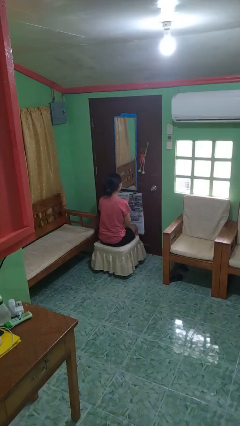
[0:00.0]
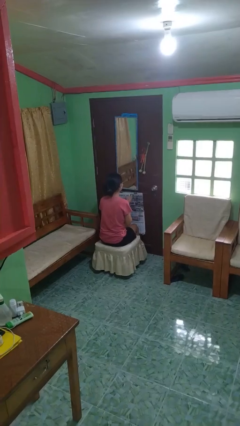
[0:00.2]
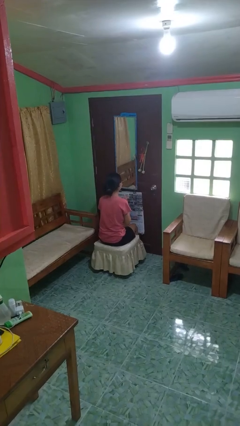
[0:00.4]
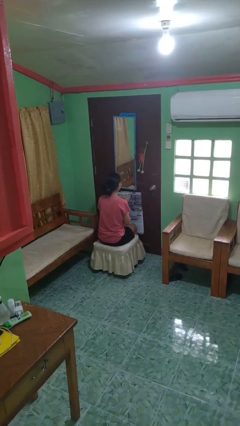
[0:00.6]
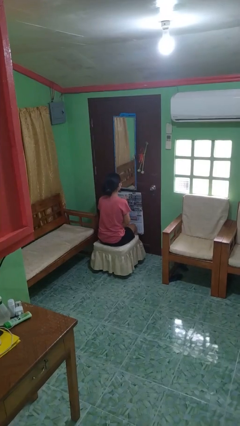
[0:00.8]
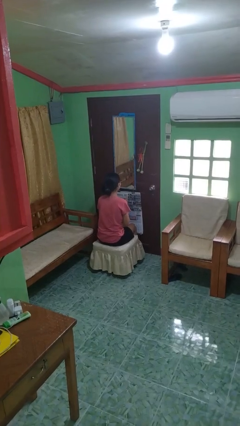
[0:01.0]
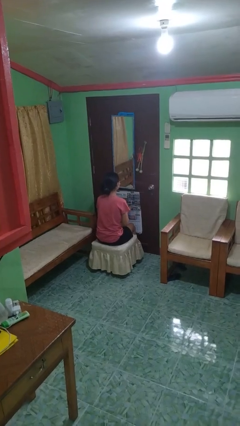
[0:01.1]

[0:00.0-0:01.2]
person claps hands

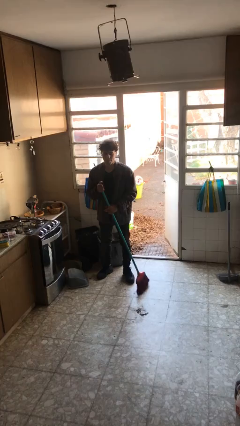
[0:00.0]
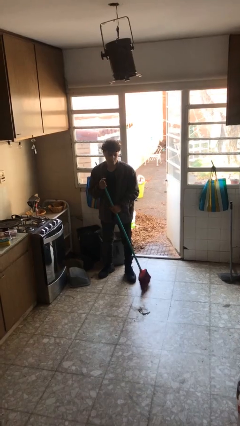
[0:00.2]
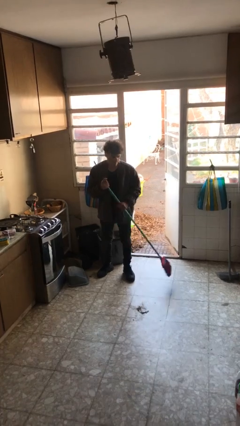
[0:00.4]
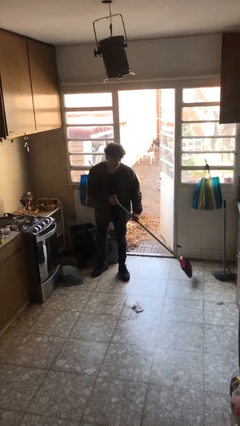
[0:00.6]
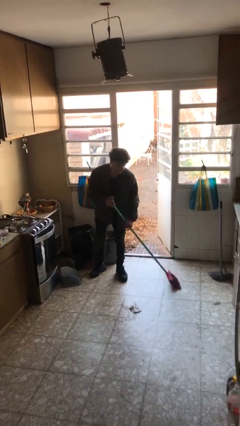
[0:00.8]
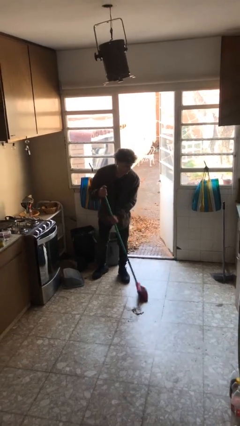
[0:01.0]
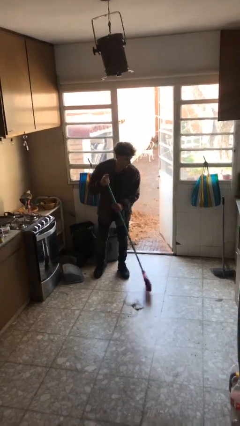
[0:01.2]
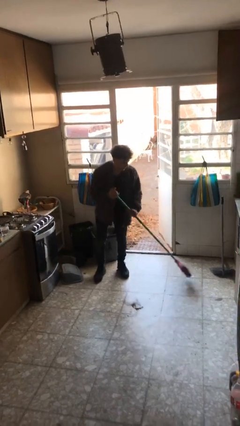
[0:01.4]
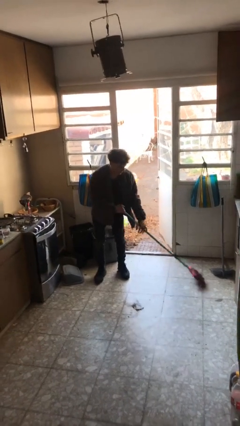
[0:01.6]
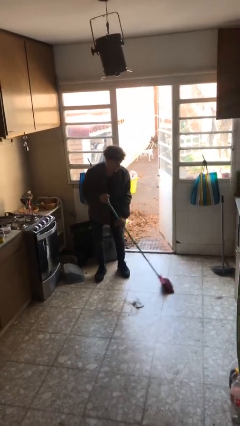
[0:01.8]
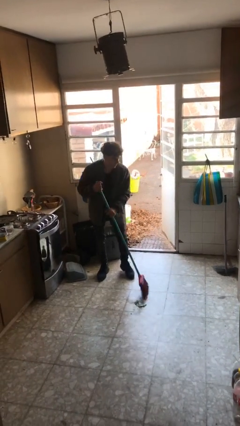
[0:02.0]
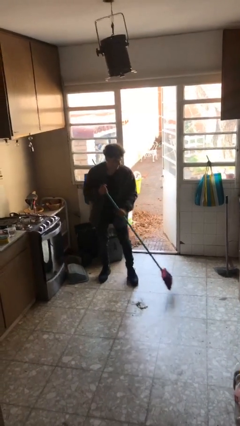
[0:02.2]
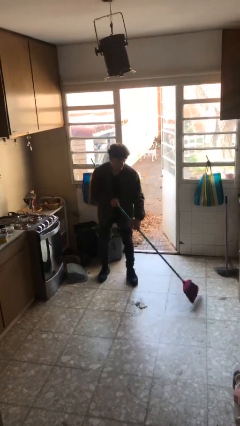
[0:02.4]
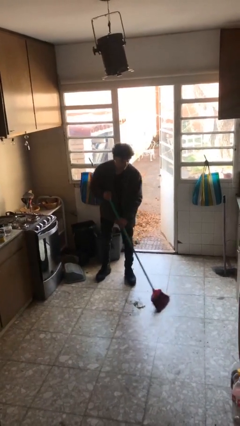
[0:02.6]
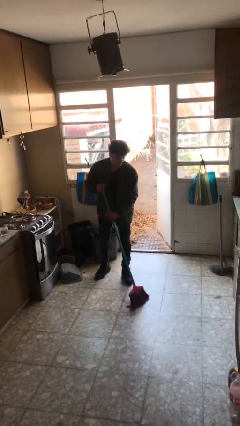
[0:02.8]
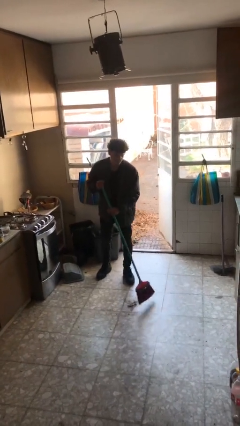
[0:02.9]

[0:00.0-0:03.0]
person sweeps floor

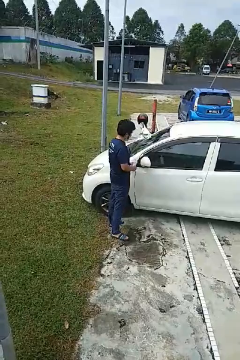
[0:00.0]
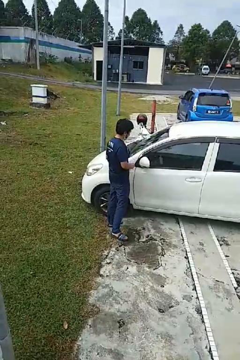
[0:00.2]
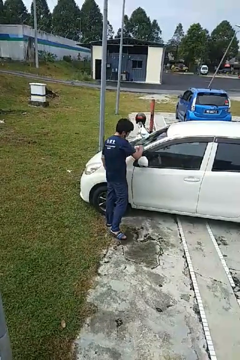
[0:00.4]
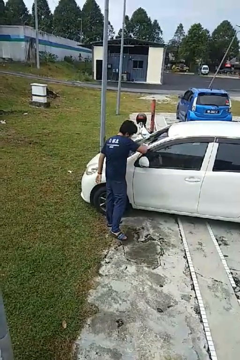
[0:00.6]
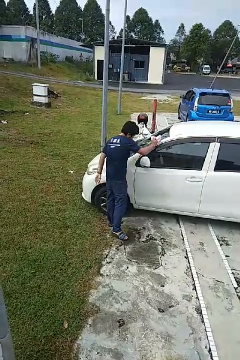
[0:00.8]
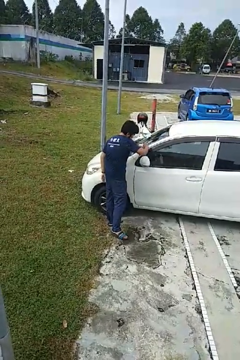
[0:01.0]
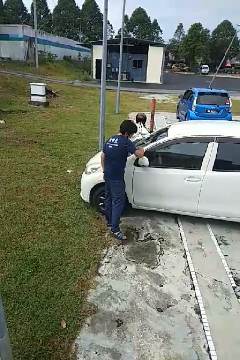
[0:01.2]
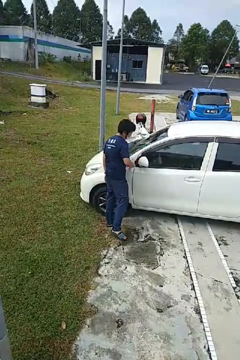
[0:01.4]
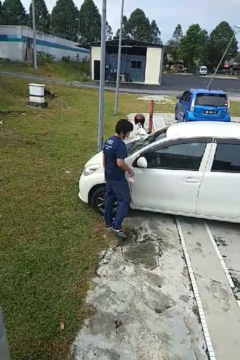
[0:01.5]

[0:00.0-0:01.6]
person polishes car with rag

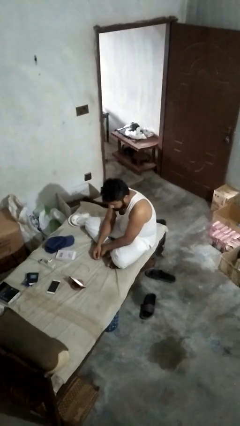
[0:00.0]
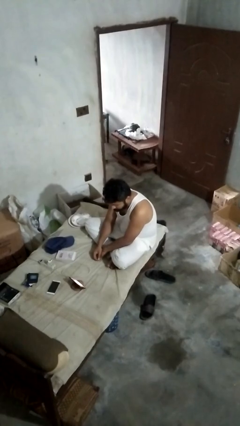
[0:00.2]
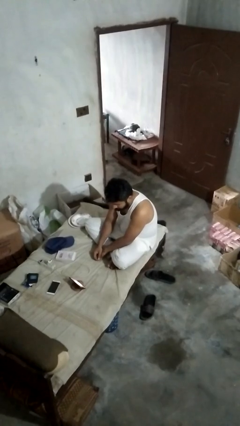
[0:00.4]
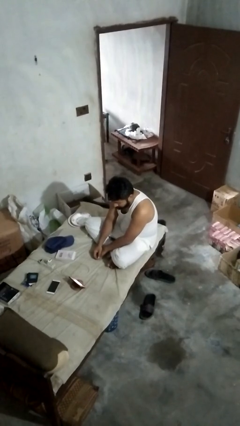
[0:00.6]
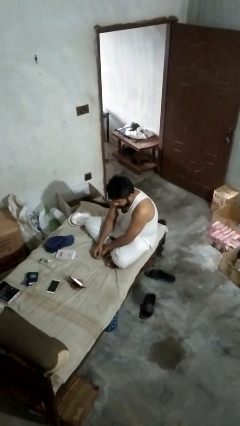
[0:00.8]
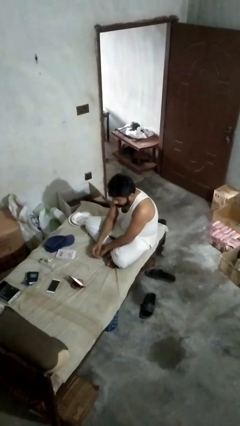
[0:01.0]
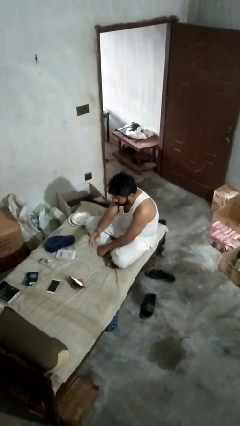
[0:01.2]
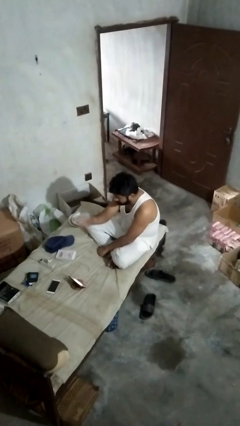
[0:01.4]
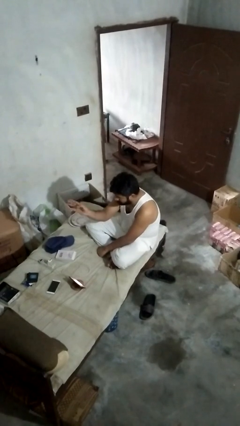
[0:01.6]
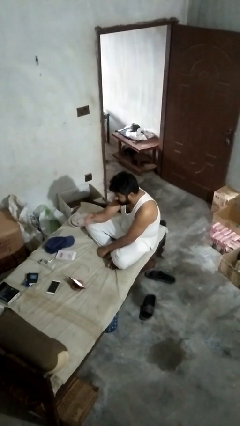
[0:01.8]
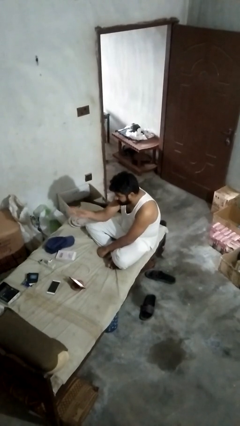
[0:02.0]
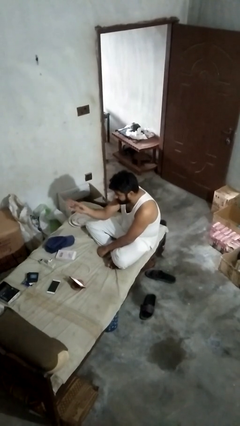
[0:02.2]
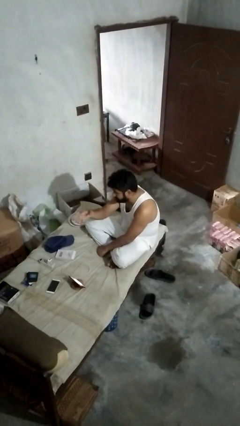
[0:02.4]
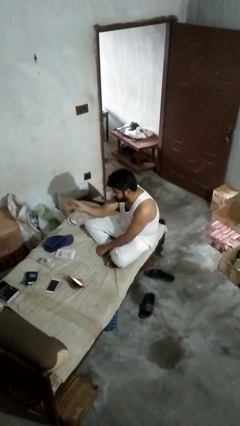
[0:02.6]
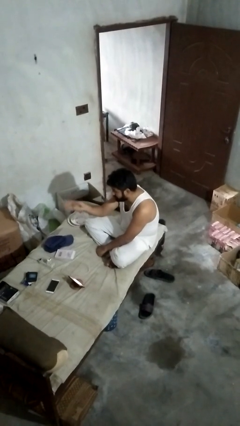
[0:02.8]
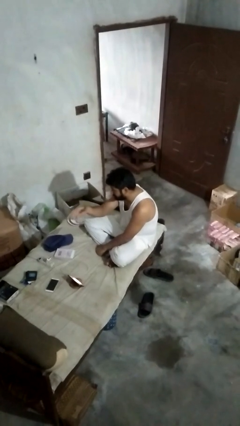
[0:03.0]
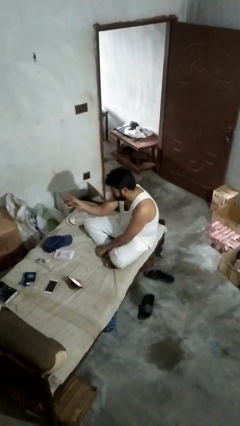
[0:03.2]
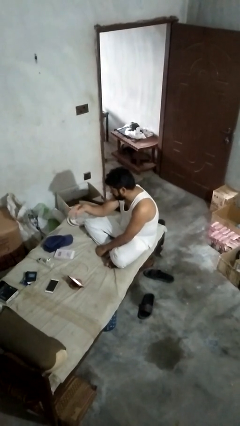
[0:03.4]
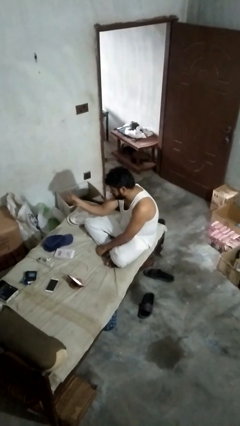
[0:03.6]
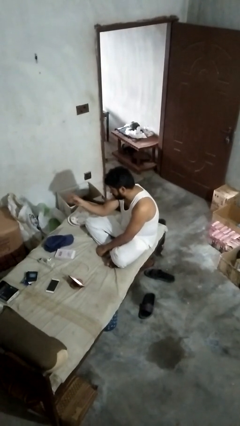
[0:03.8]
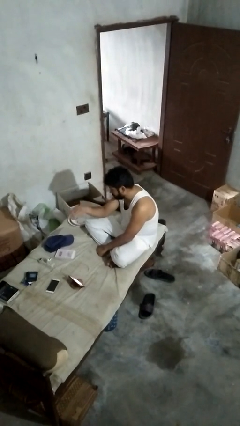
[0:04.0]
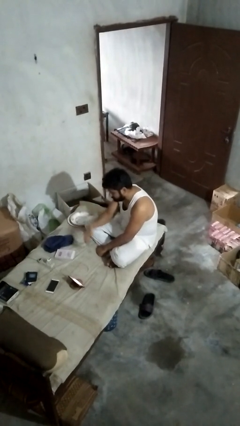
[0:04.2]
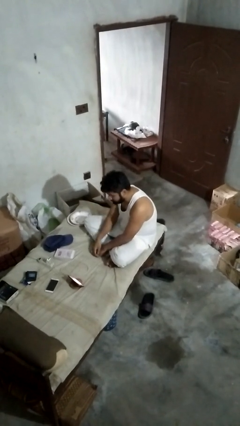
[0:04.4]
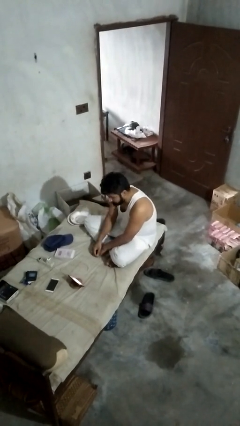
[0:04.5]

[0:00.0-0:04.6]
person gestures swipe right

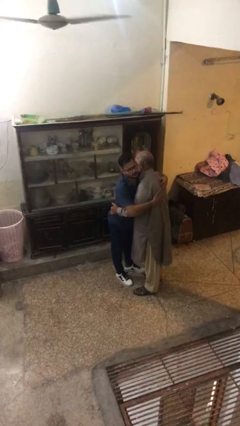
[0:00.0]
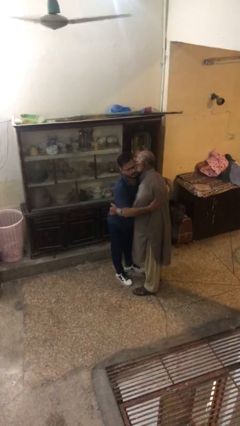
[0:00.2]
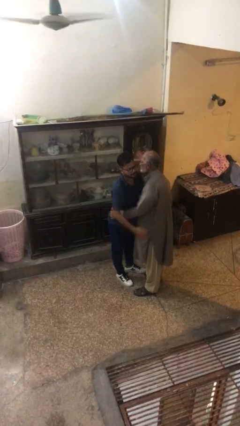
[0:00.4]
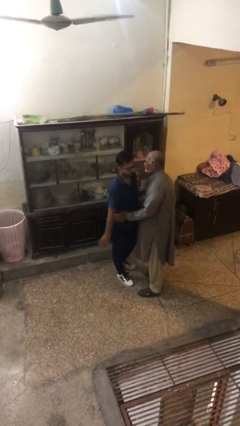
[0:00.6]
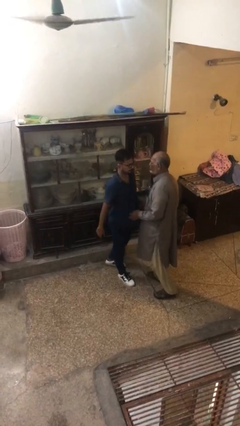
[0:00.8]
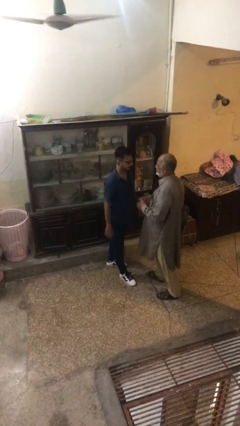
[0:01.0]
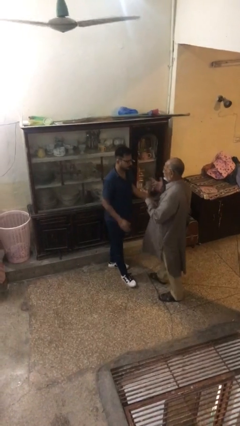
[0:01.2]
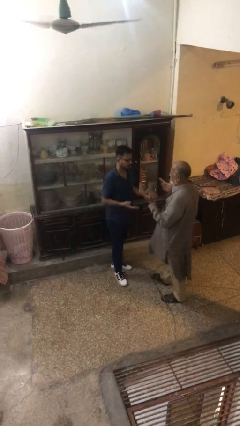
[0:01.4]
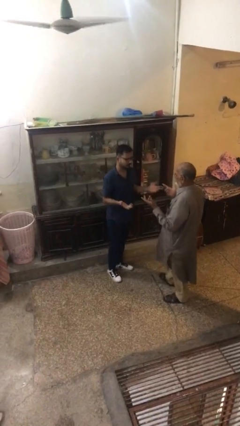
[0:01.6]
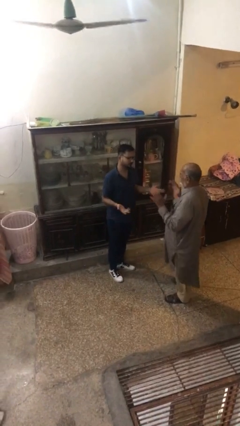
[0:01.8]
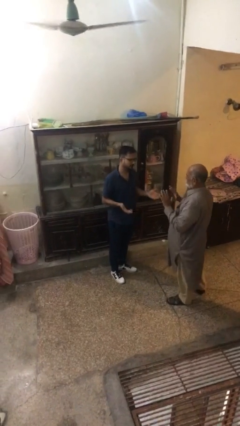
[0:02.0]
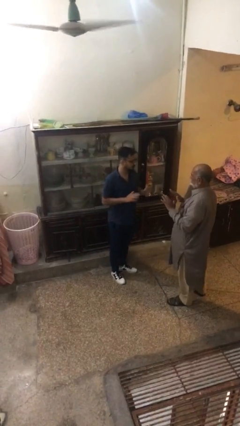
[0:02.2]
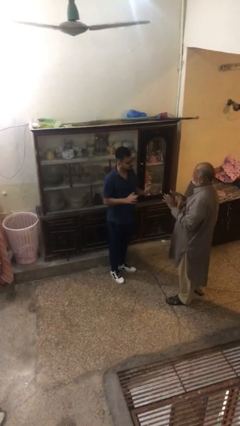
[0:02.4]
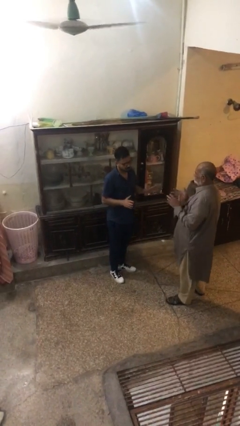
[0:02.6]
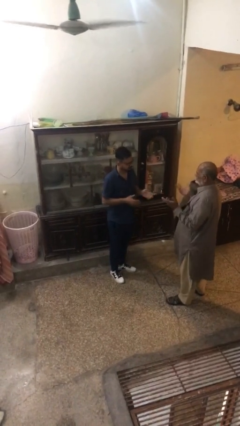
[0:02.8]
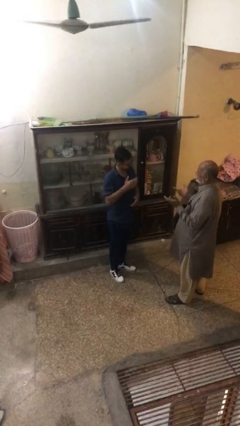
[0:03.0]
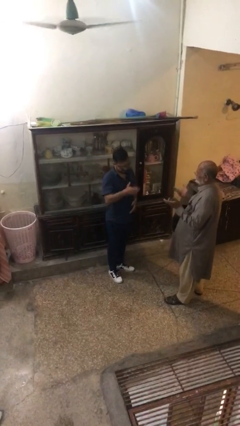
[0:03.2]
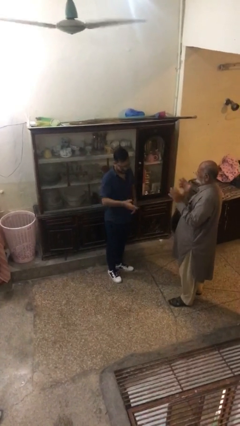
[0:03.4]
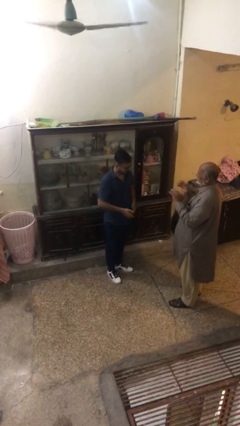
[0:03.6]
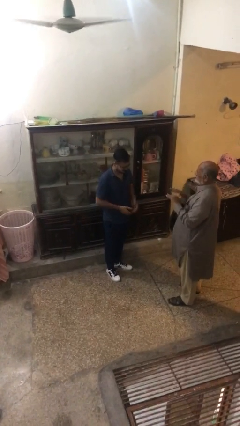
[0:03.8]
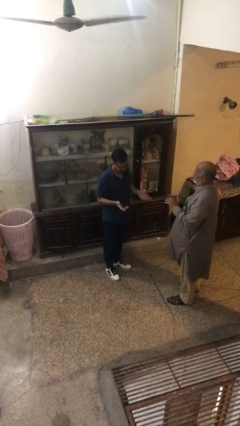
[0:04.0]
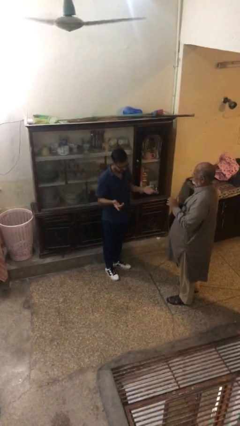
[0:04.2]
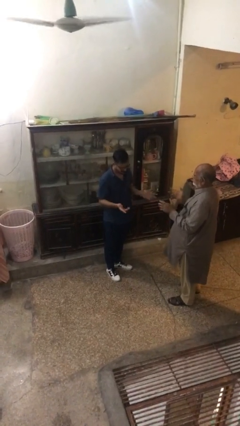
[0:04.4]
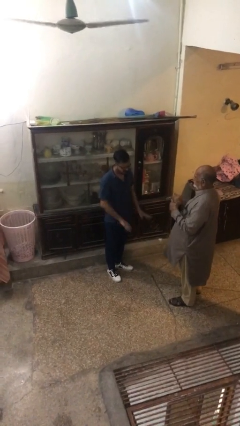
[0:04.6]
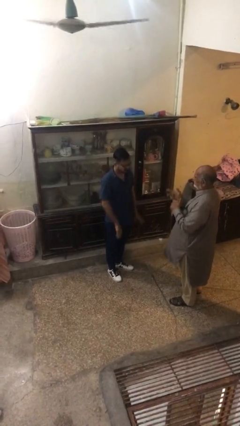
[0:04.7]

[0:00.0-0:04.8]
person talks to person

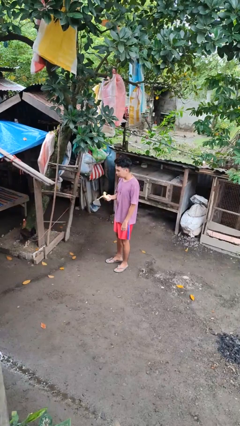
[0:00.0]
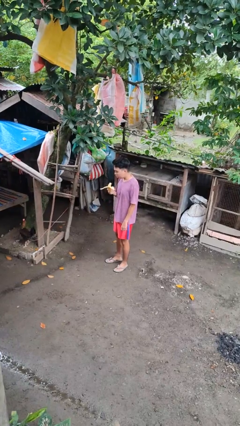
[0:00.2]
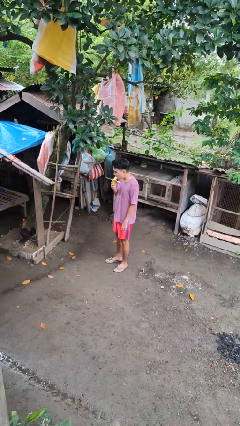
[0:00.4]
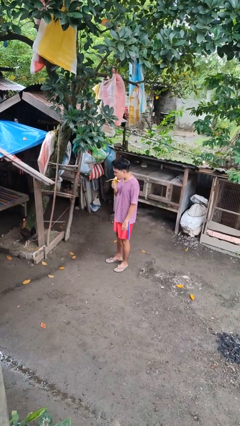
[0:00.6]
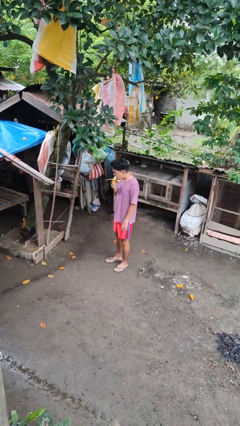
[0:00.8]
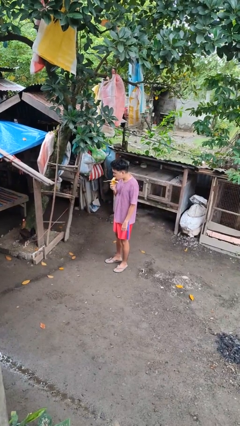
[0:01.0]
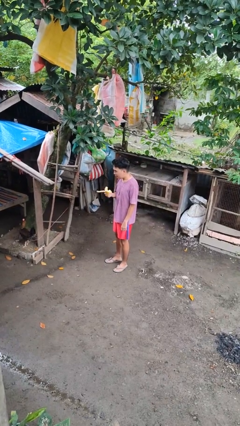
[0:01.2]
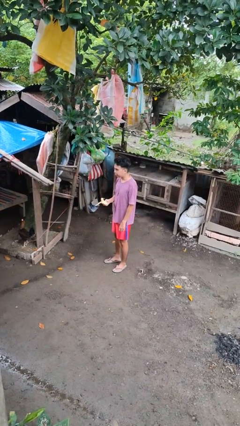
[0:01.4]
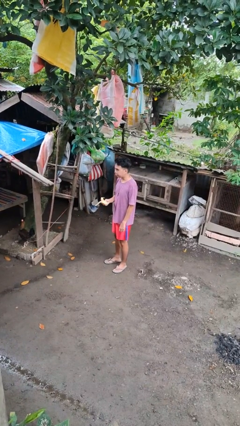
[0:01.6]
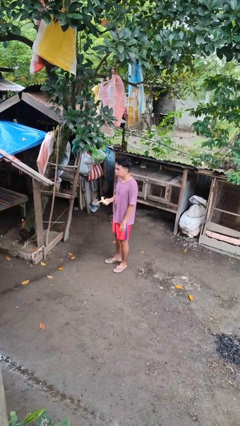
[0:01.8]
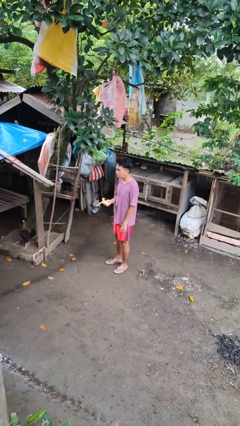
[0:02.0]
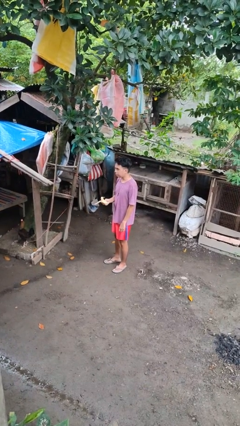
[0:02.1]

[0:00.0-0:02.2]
person eats banana

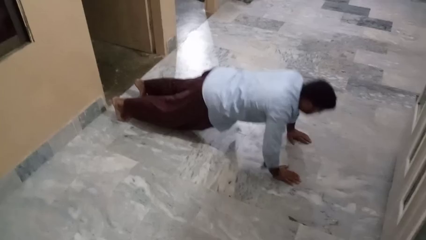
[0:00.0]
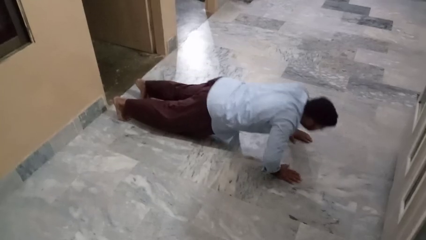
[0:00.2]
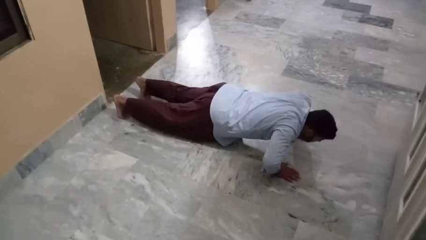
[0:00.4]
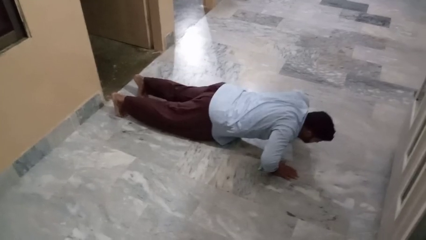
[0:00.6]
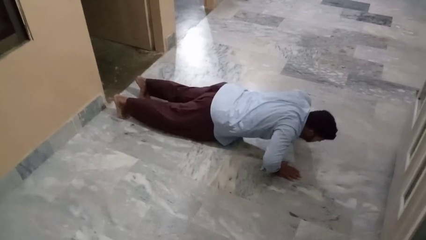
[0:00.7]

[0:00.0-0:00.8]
person exercises with pushup
